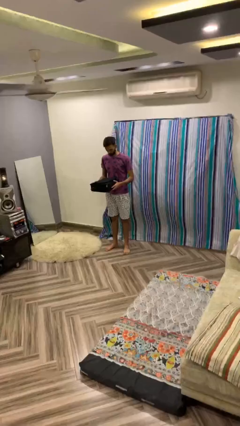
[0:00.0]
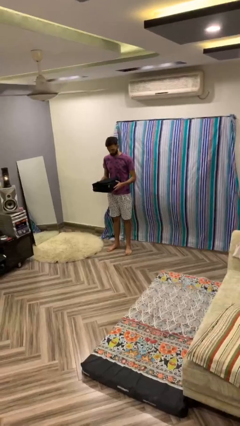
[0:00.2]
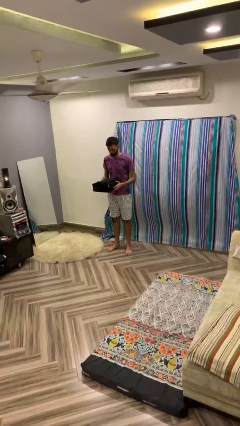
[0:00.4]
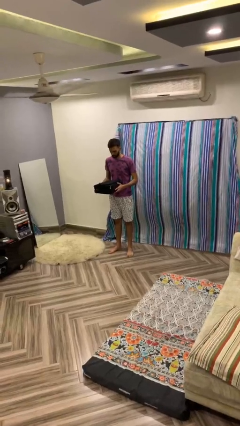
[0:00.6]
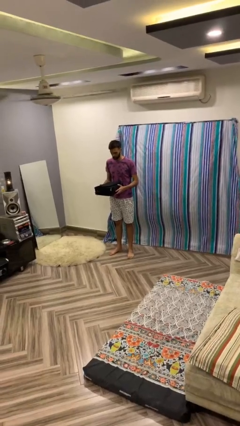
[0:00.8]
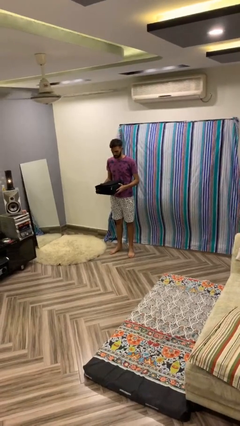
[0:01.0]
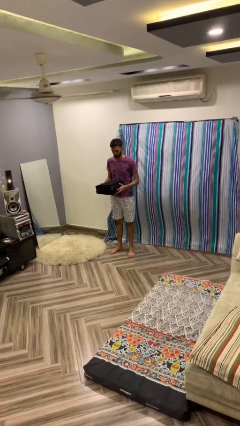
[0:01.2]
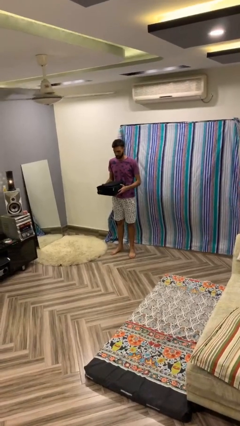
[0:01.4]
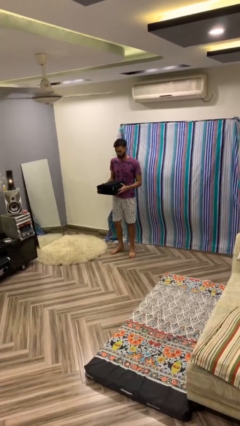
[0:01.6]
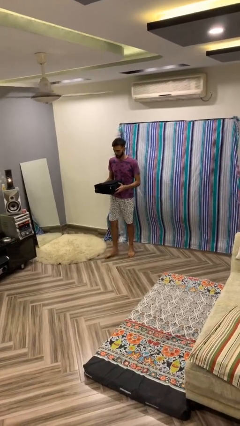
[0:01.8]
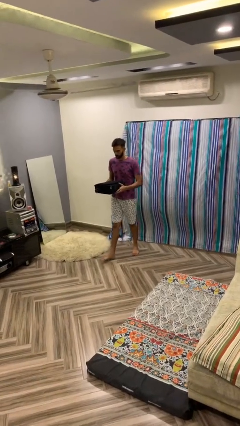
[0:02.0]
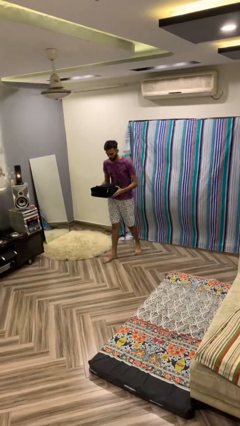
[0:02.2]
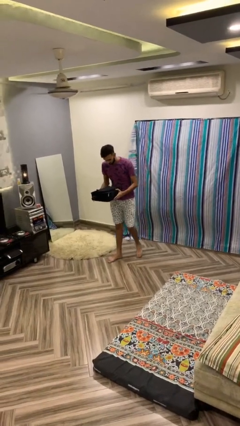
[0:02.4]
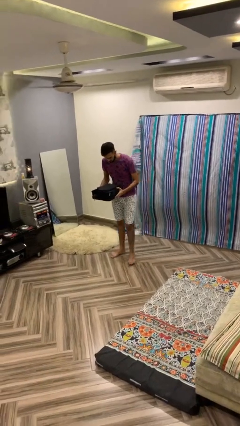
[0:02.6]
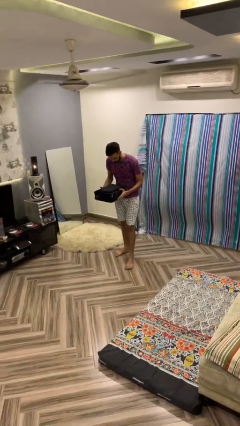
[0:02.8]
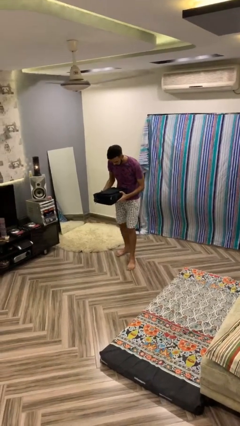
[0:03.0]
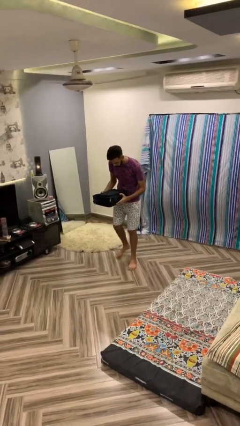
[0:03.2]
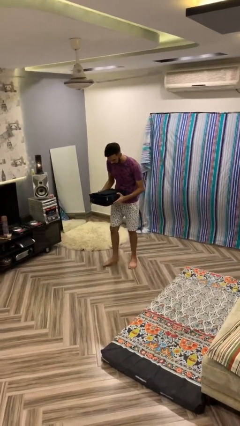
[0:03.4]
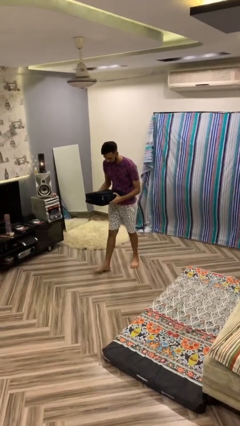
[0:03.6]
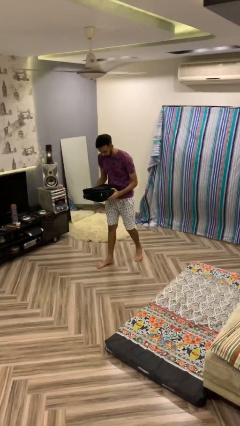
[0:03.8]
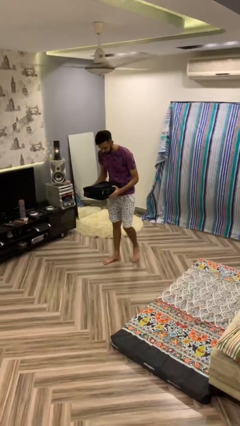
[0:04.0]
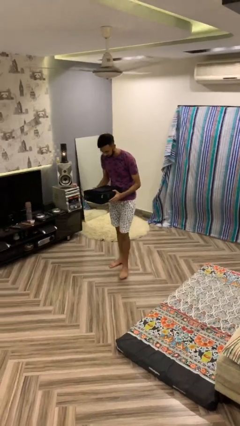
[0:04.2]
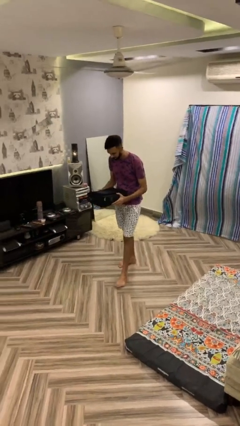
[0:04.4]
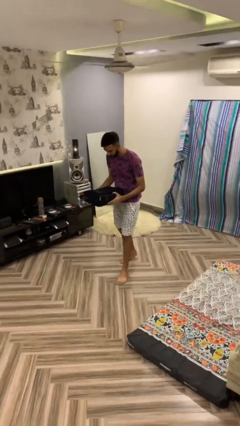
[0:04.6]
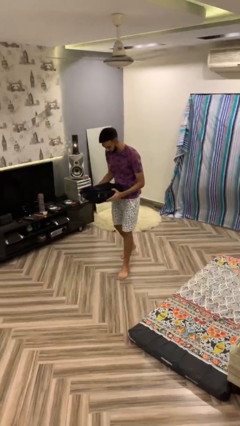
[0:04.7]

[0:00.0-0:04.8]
person carries heavy object

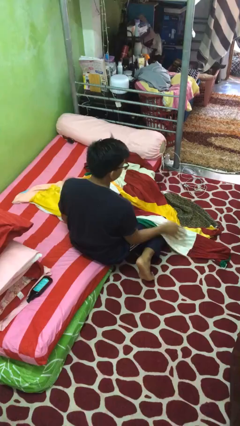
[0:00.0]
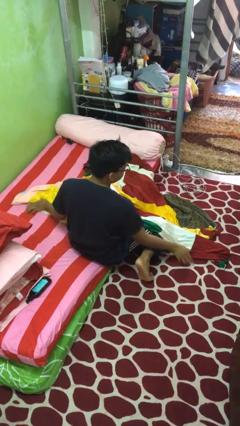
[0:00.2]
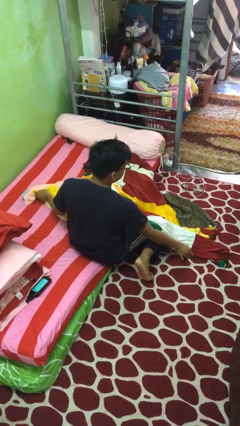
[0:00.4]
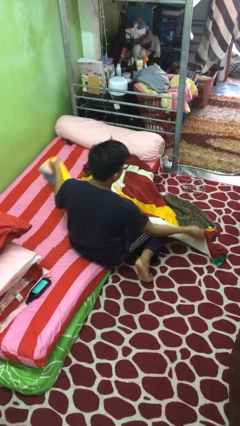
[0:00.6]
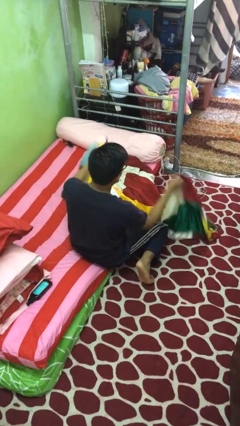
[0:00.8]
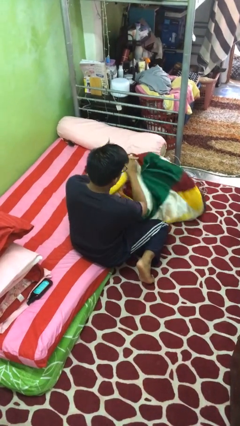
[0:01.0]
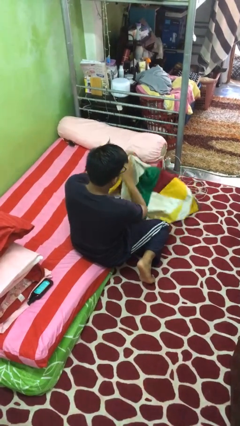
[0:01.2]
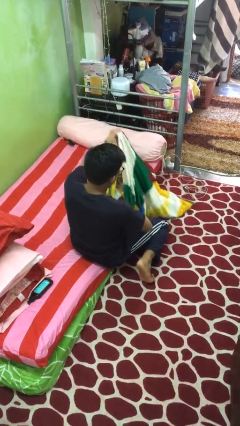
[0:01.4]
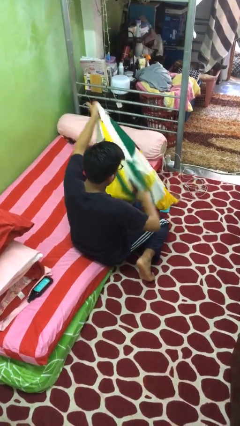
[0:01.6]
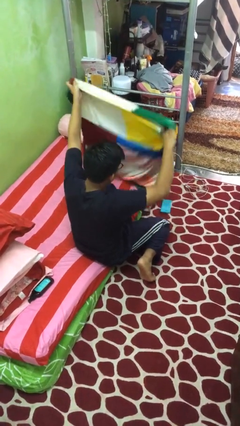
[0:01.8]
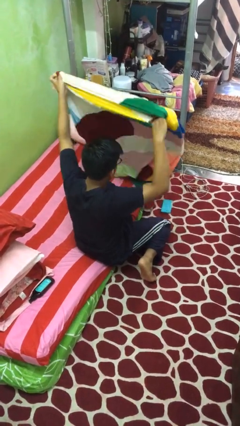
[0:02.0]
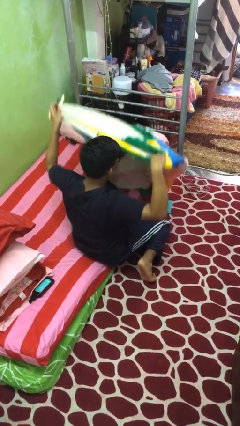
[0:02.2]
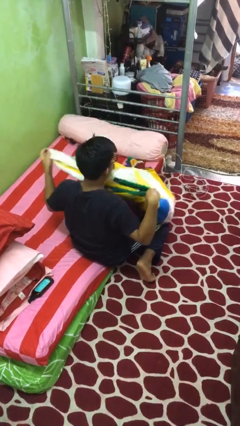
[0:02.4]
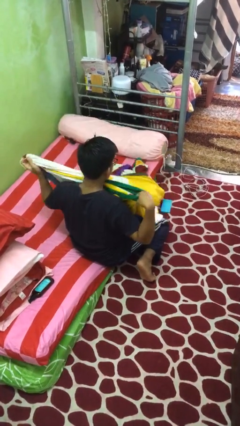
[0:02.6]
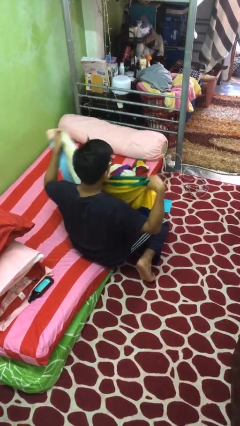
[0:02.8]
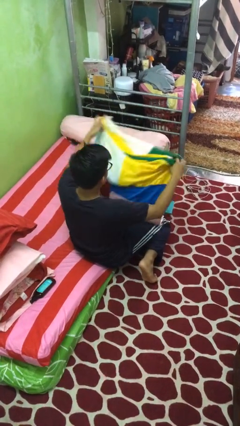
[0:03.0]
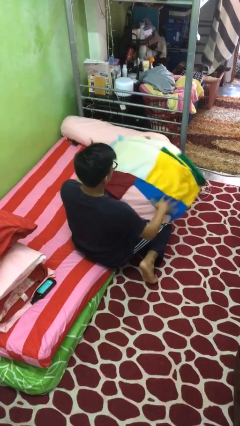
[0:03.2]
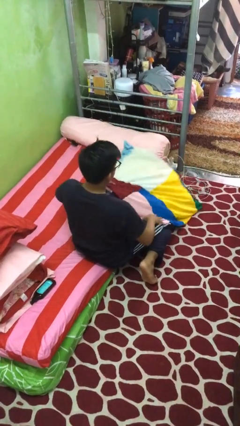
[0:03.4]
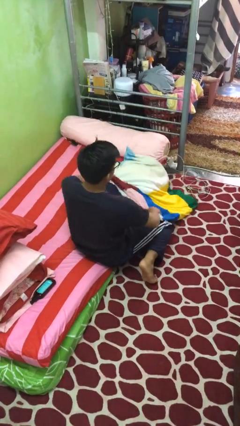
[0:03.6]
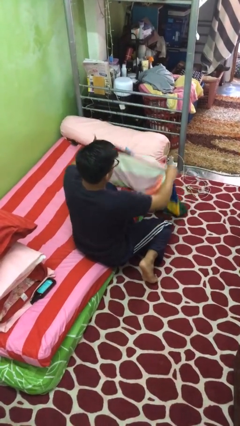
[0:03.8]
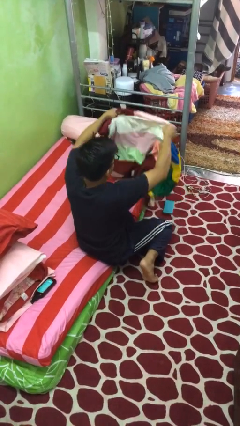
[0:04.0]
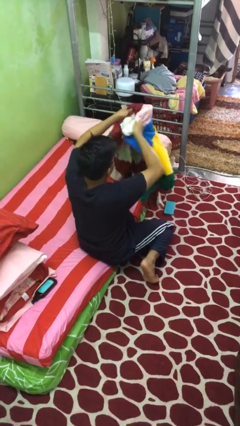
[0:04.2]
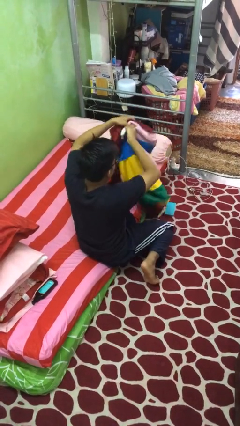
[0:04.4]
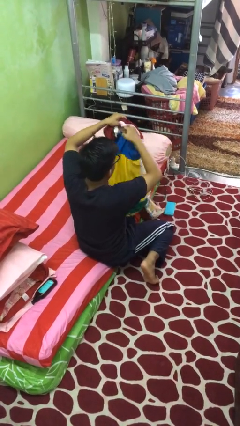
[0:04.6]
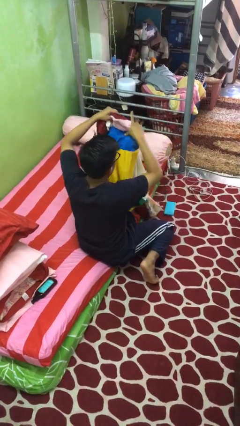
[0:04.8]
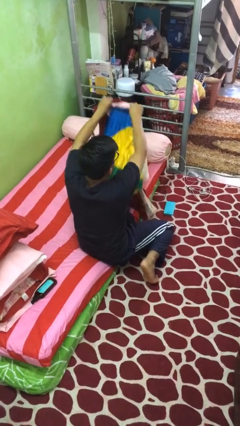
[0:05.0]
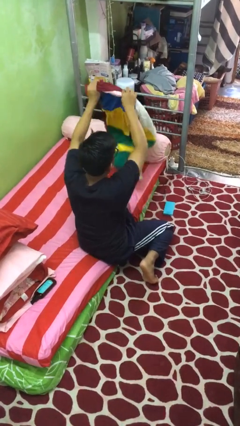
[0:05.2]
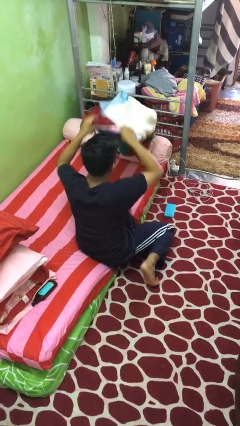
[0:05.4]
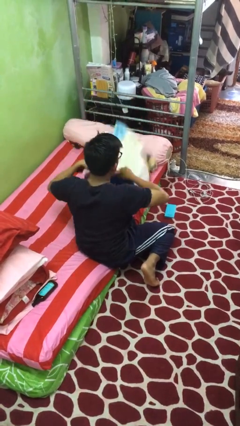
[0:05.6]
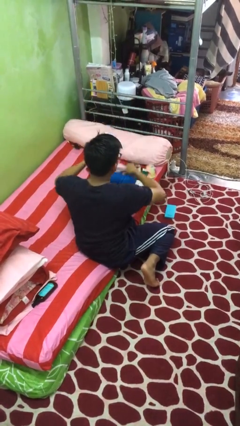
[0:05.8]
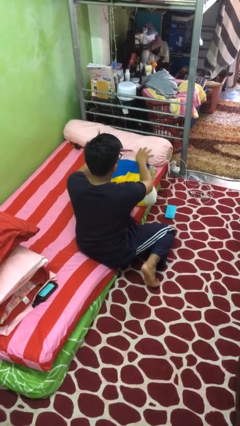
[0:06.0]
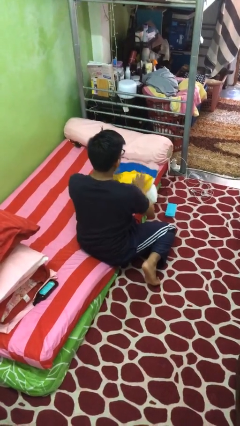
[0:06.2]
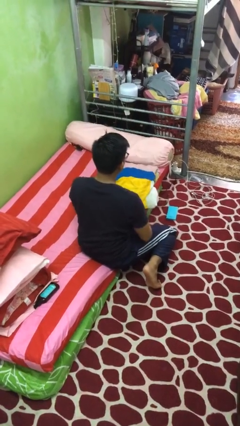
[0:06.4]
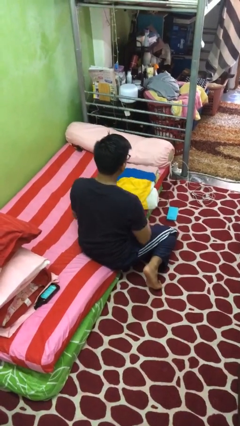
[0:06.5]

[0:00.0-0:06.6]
person folds blanket

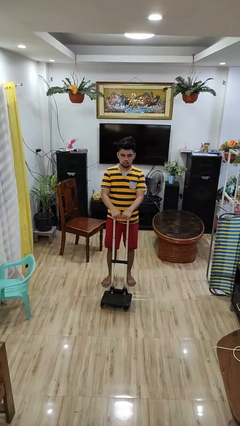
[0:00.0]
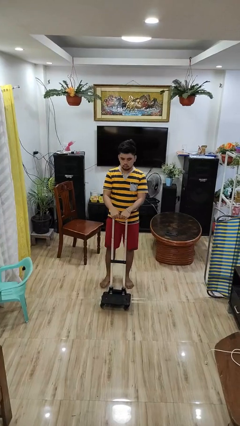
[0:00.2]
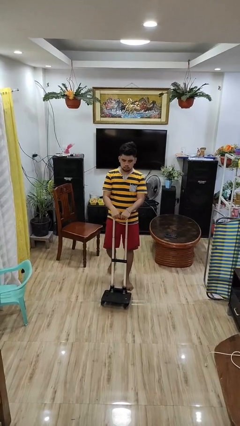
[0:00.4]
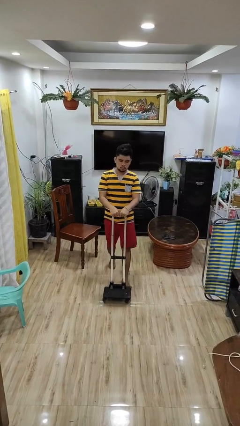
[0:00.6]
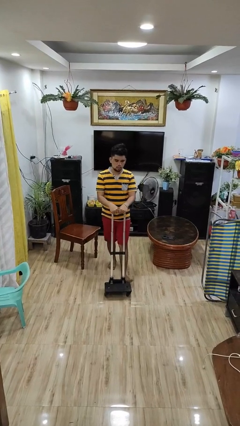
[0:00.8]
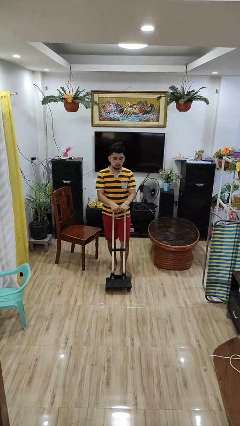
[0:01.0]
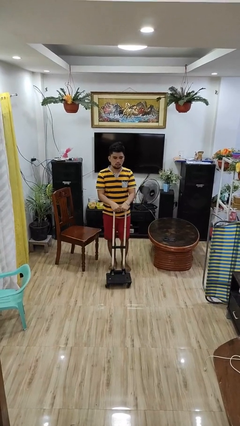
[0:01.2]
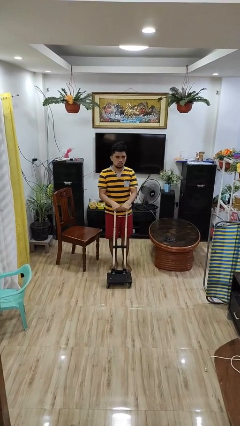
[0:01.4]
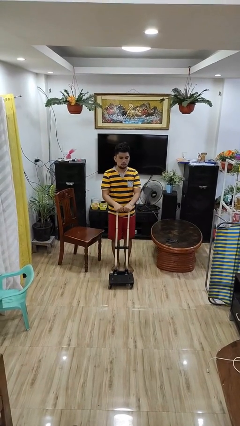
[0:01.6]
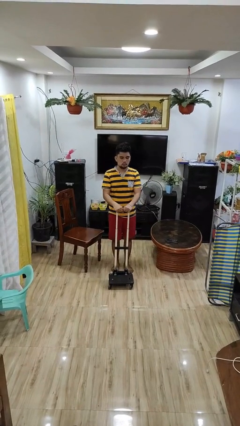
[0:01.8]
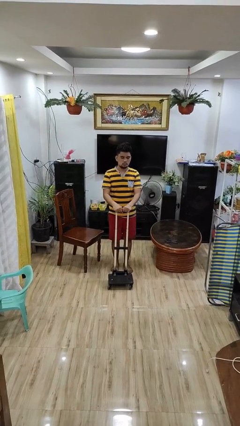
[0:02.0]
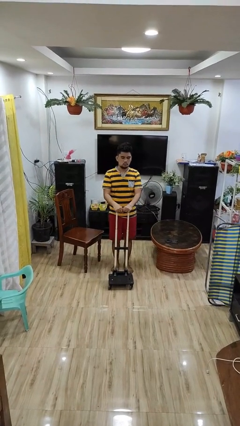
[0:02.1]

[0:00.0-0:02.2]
person pulls wheeled cart

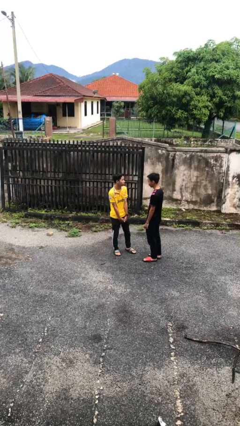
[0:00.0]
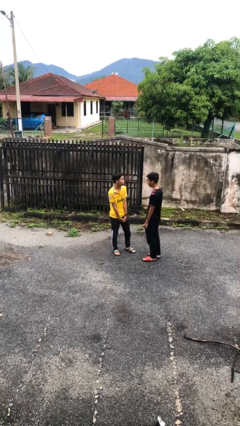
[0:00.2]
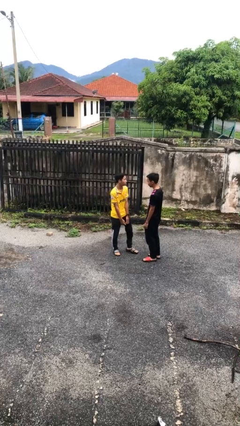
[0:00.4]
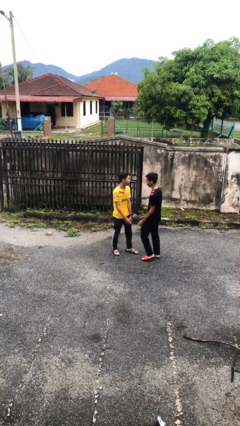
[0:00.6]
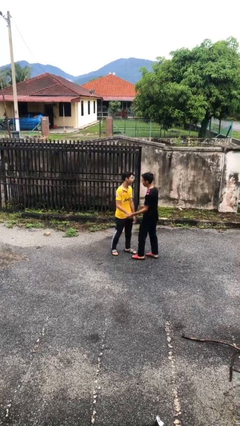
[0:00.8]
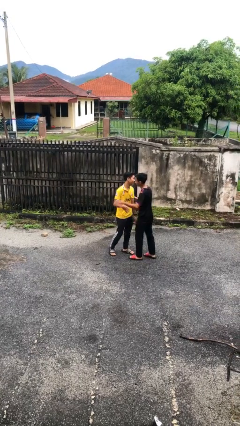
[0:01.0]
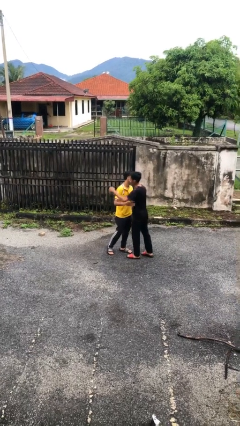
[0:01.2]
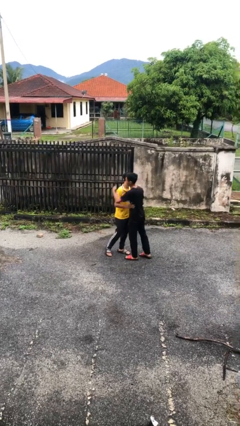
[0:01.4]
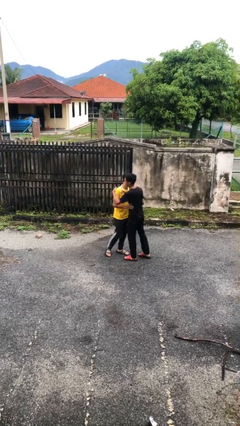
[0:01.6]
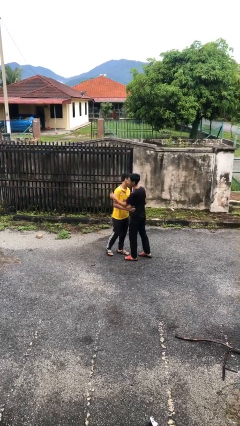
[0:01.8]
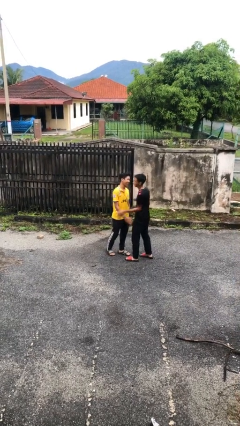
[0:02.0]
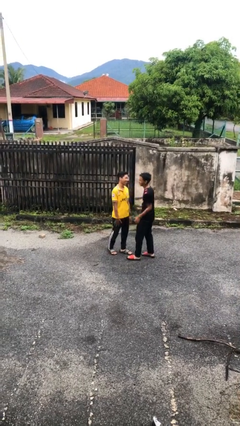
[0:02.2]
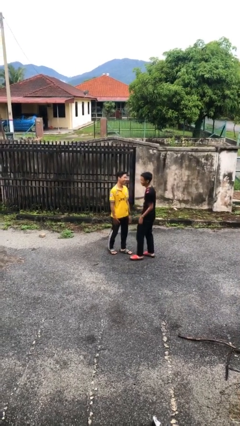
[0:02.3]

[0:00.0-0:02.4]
person embraces person

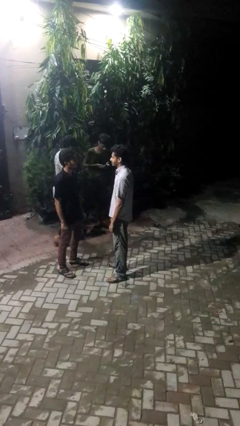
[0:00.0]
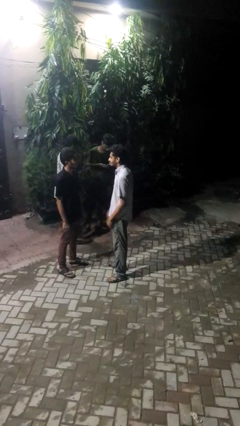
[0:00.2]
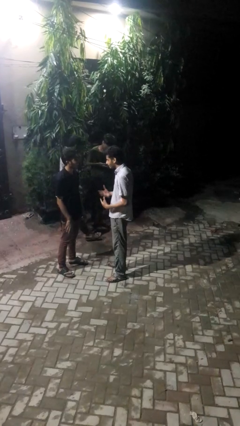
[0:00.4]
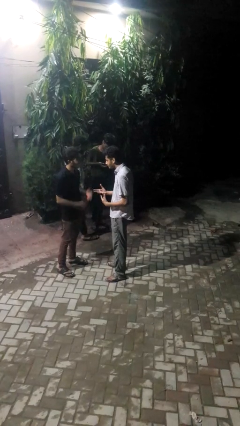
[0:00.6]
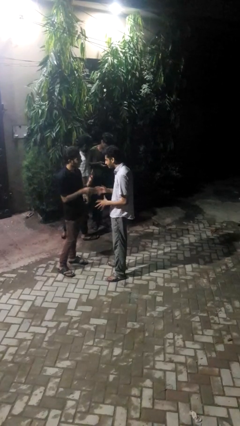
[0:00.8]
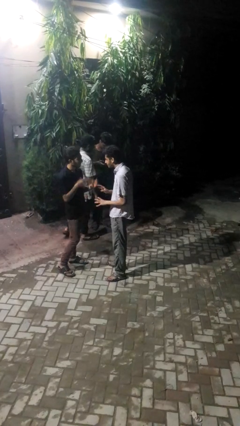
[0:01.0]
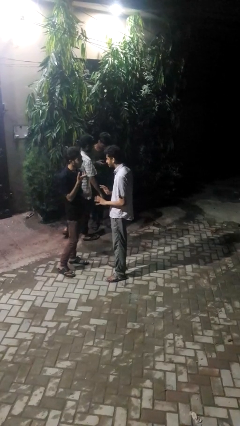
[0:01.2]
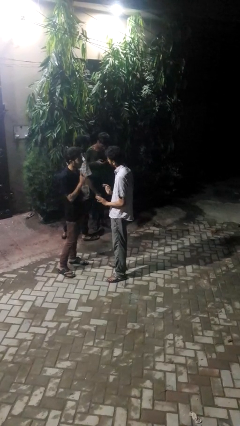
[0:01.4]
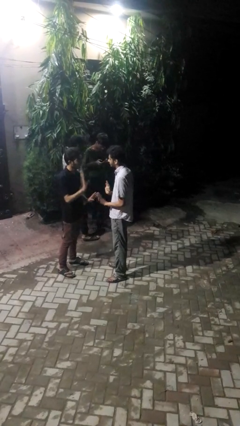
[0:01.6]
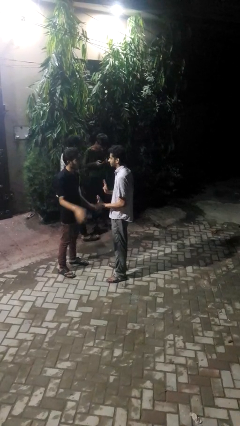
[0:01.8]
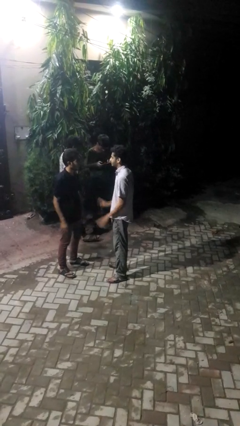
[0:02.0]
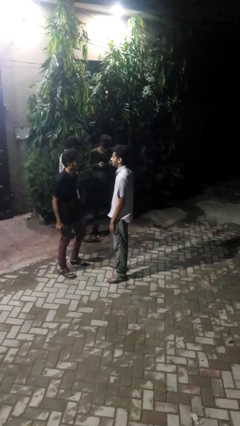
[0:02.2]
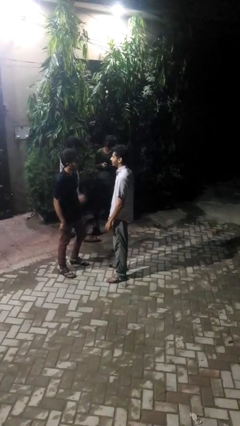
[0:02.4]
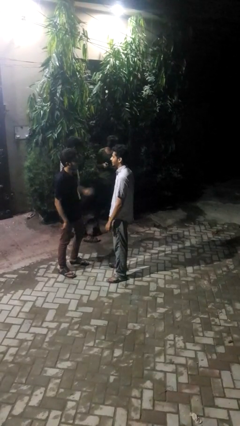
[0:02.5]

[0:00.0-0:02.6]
person talks to person
